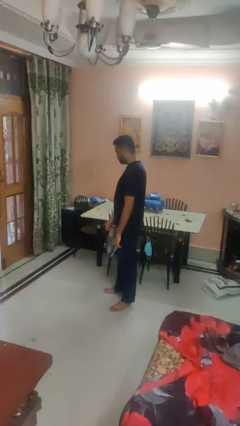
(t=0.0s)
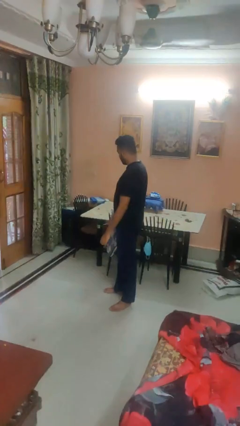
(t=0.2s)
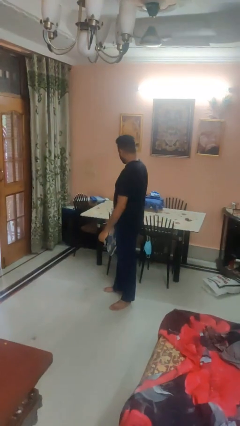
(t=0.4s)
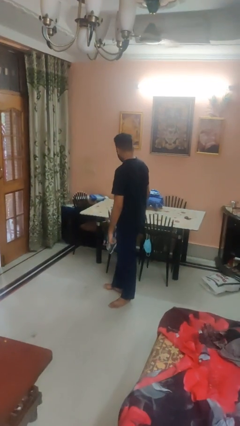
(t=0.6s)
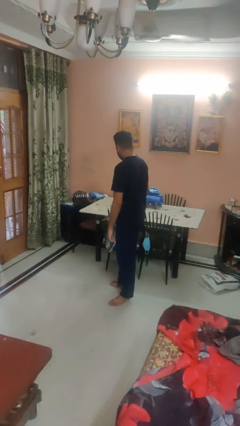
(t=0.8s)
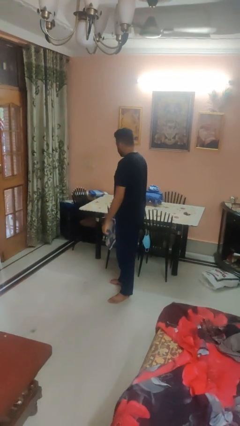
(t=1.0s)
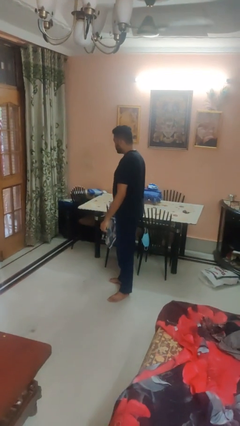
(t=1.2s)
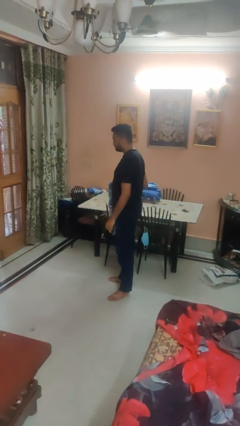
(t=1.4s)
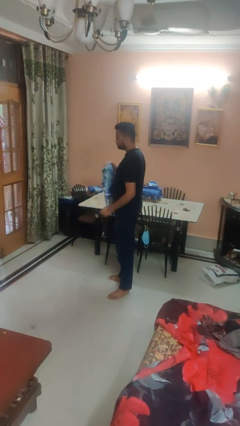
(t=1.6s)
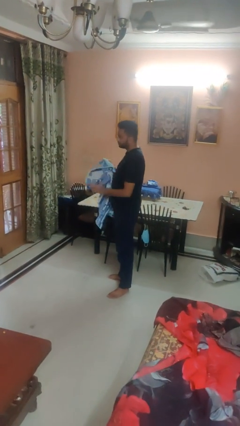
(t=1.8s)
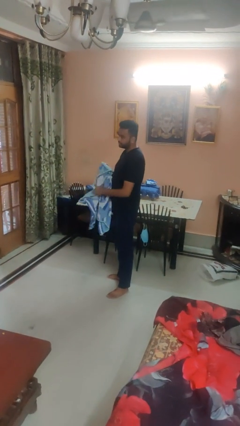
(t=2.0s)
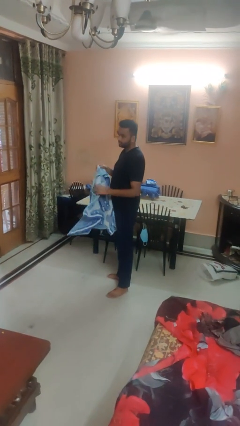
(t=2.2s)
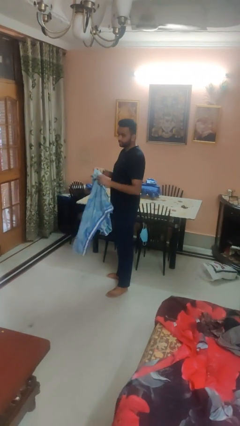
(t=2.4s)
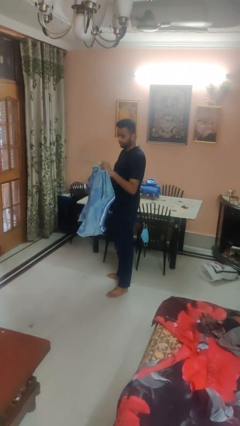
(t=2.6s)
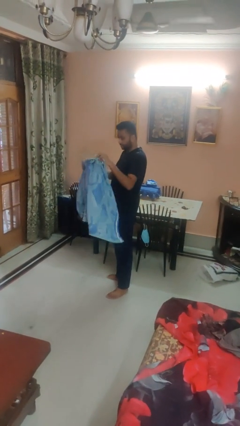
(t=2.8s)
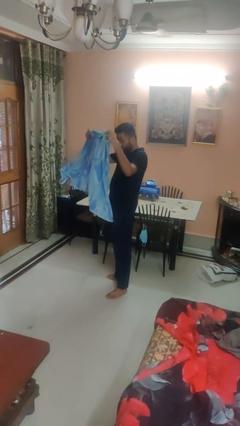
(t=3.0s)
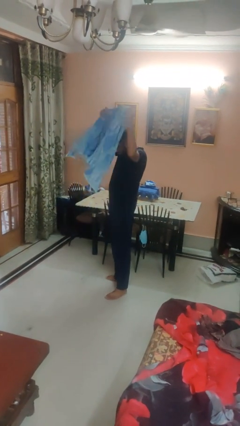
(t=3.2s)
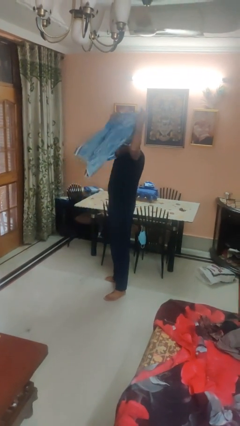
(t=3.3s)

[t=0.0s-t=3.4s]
person dries hair with towel

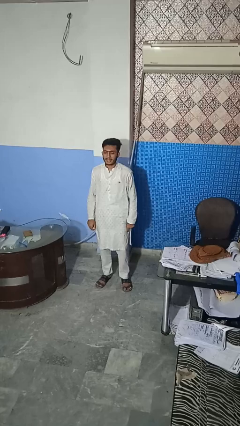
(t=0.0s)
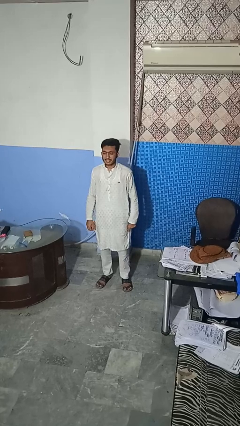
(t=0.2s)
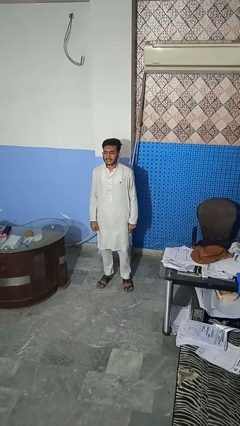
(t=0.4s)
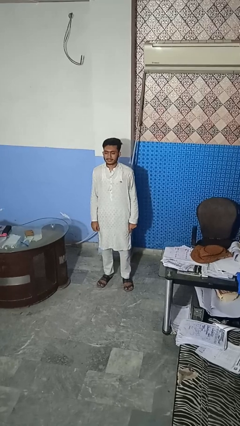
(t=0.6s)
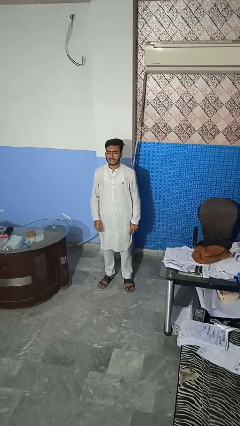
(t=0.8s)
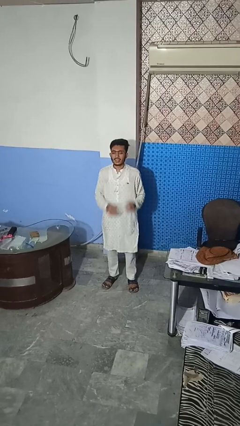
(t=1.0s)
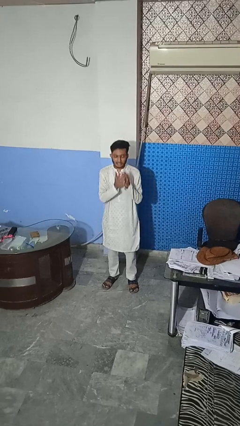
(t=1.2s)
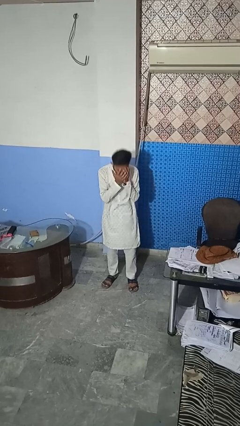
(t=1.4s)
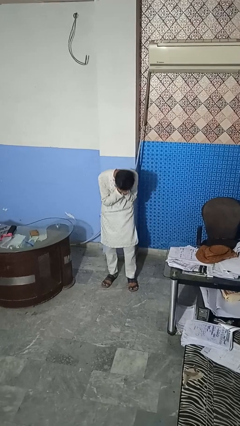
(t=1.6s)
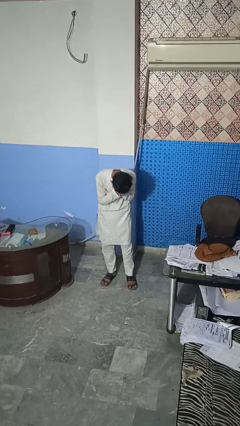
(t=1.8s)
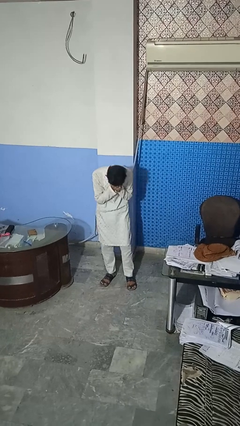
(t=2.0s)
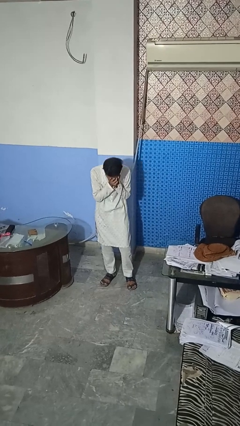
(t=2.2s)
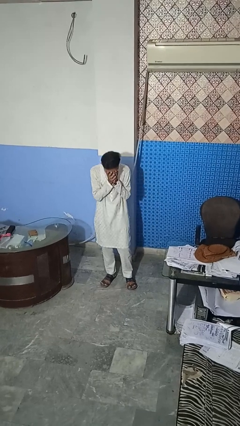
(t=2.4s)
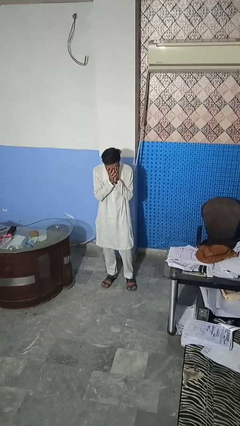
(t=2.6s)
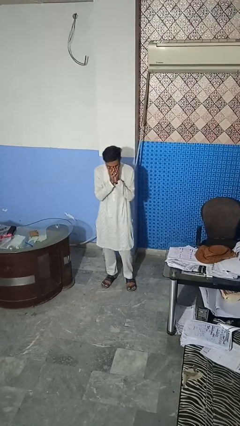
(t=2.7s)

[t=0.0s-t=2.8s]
person sneezes into hand

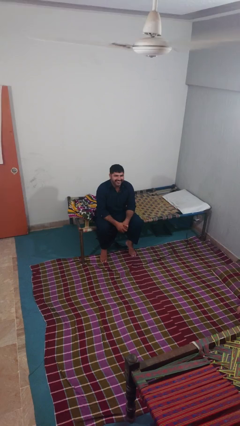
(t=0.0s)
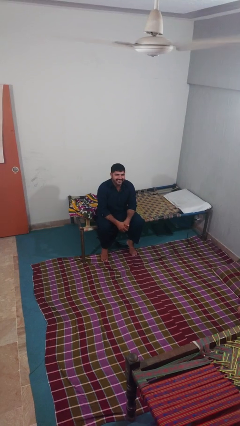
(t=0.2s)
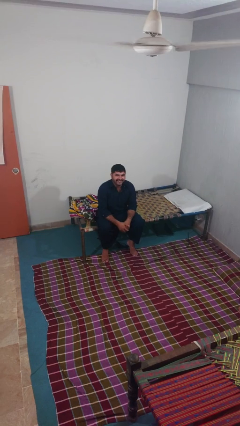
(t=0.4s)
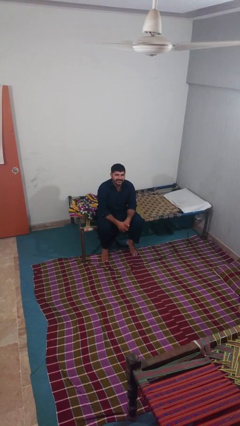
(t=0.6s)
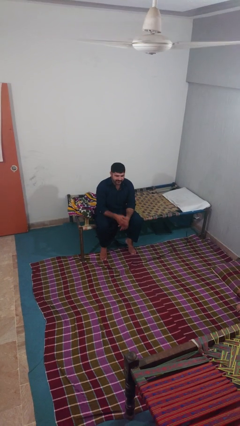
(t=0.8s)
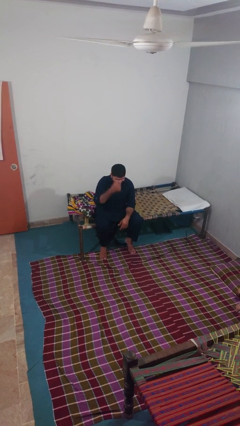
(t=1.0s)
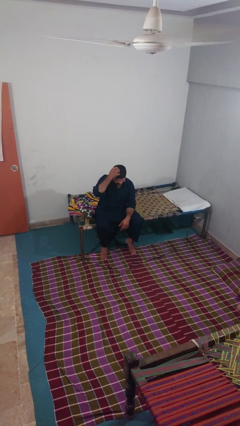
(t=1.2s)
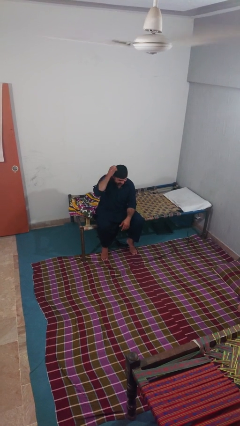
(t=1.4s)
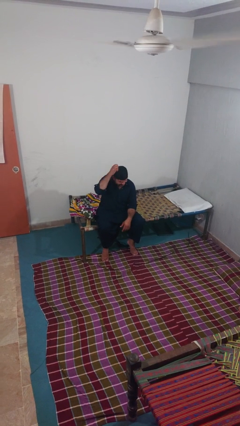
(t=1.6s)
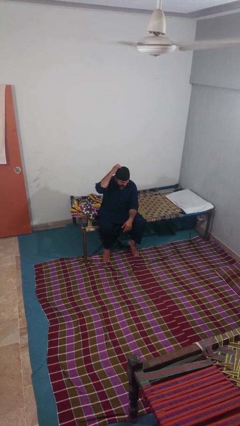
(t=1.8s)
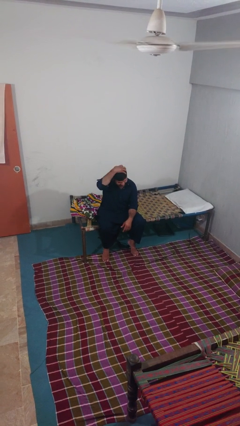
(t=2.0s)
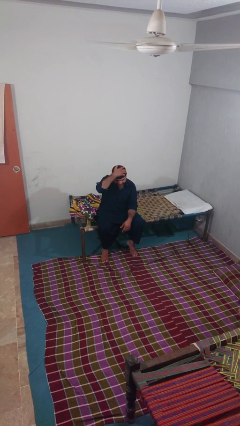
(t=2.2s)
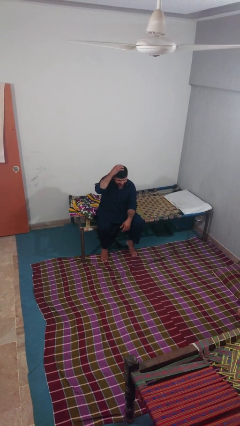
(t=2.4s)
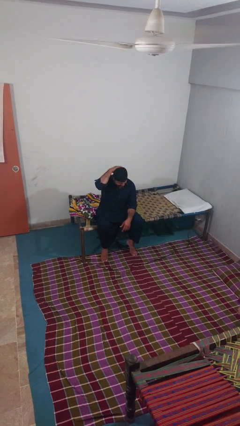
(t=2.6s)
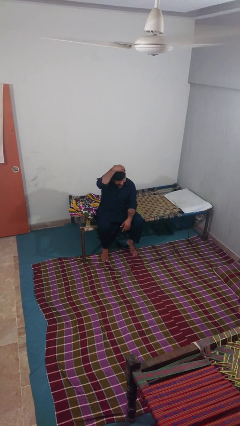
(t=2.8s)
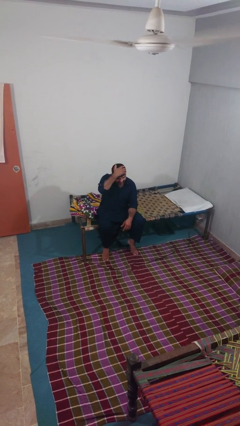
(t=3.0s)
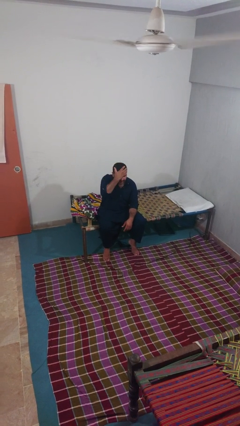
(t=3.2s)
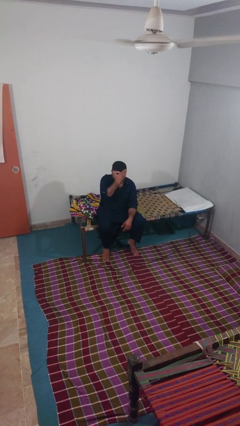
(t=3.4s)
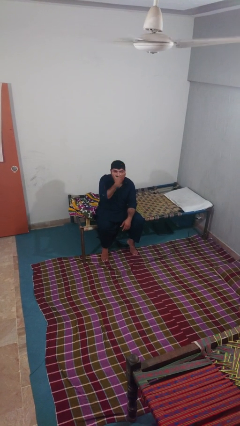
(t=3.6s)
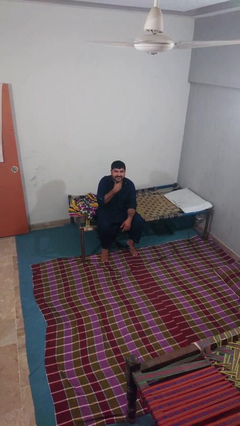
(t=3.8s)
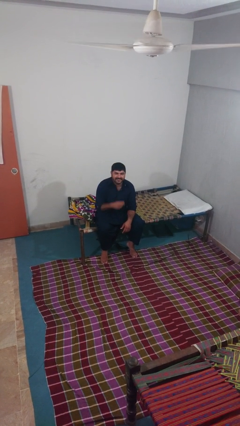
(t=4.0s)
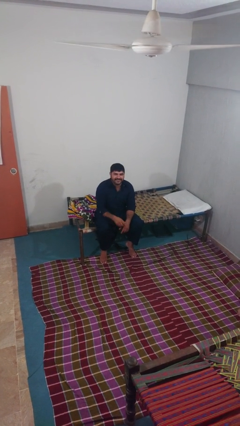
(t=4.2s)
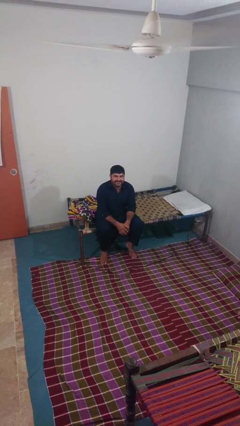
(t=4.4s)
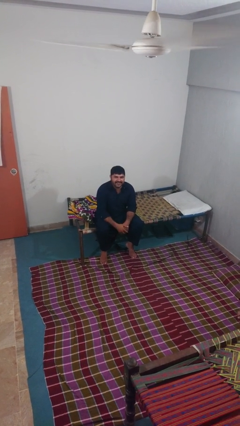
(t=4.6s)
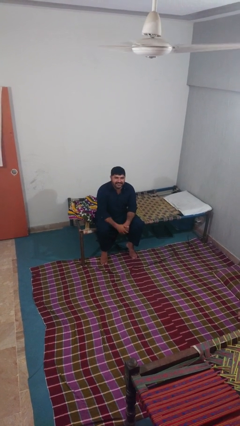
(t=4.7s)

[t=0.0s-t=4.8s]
person scratches face

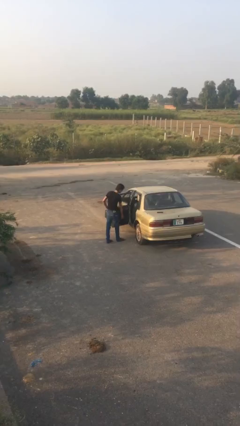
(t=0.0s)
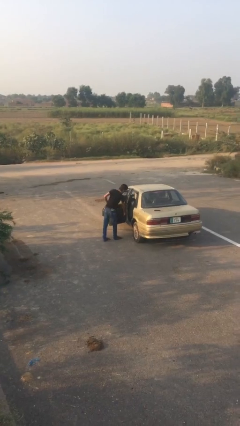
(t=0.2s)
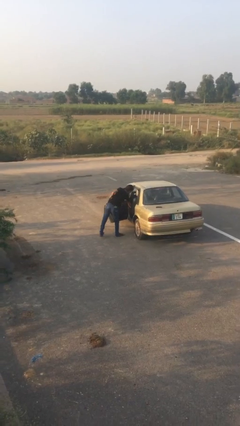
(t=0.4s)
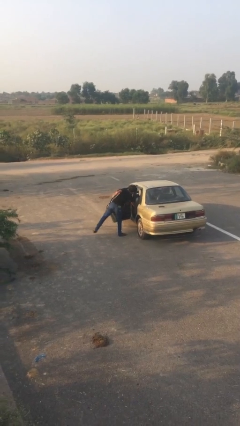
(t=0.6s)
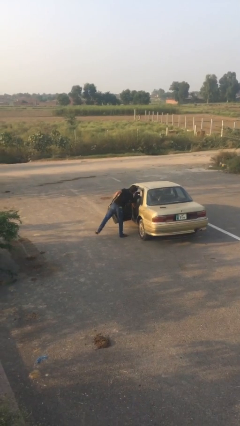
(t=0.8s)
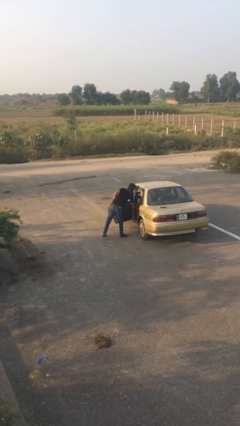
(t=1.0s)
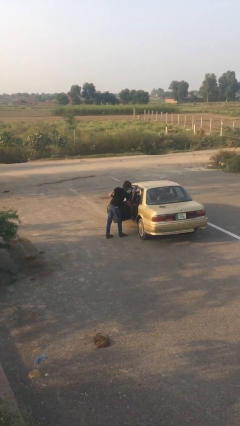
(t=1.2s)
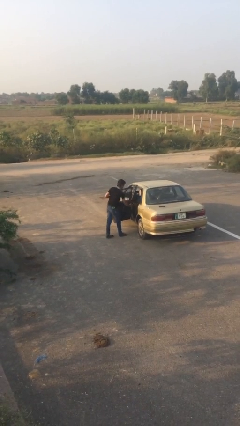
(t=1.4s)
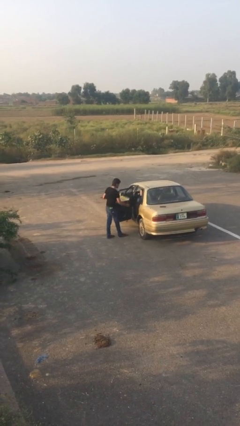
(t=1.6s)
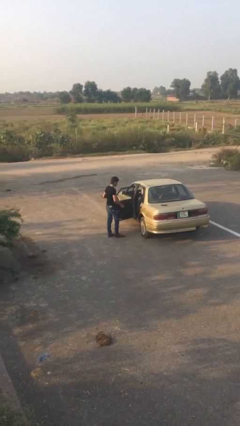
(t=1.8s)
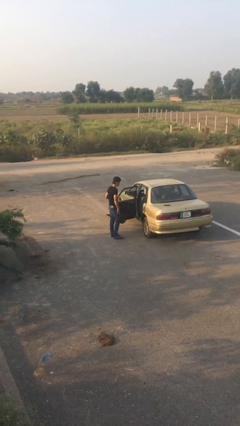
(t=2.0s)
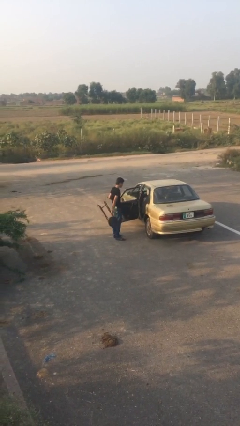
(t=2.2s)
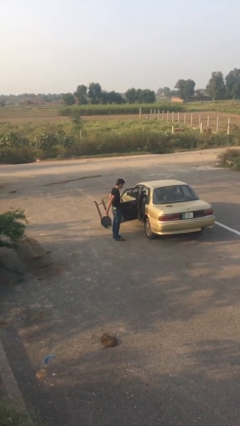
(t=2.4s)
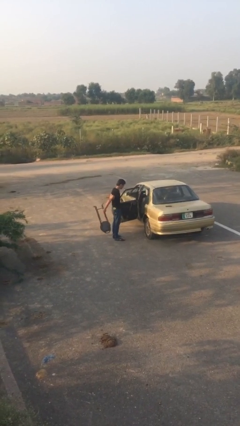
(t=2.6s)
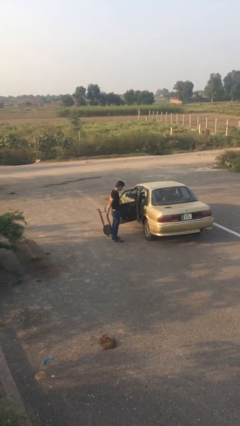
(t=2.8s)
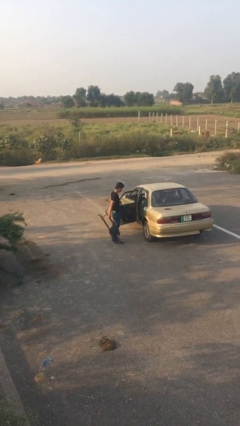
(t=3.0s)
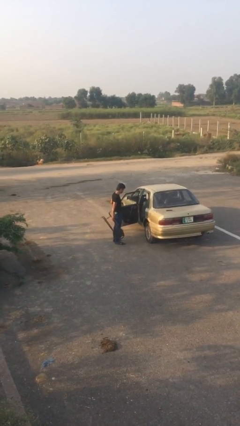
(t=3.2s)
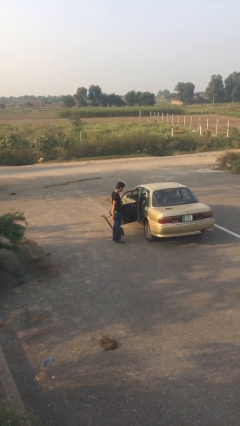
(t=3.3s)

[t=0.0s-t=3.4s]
person unloads car

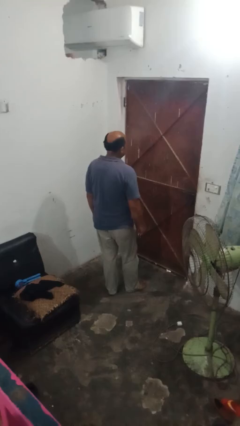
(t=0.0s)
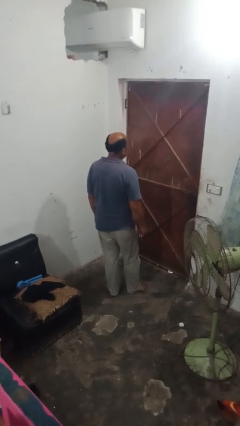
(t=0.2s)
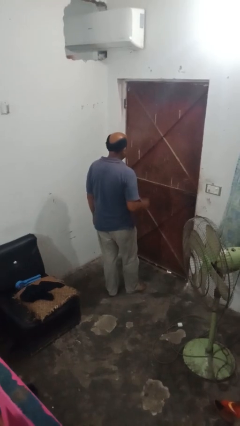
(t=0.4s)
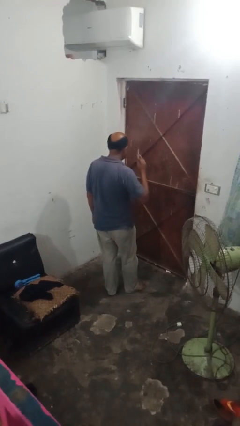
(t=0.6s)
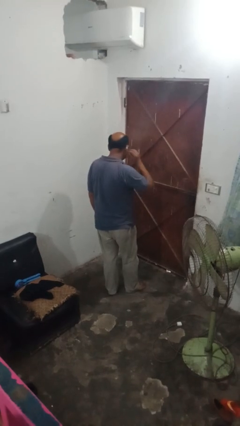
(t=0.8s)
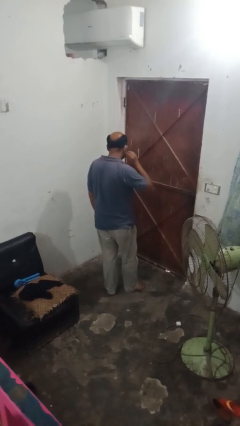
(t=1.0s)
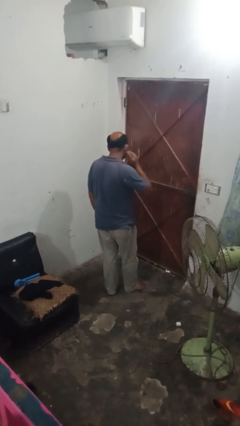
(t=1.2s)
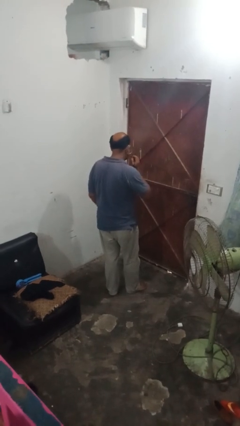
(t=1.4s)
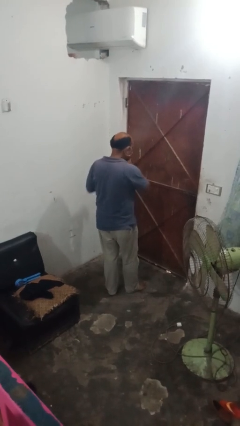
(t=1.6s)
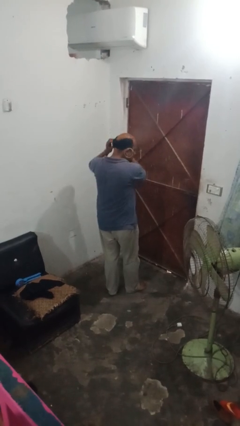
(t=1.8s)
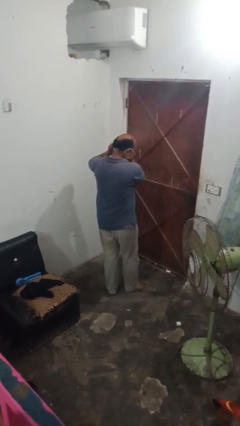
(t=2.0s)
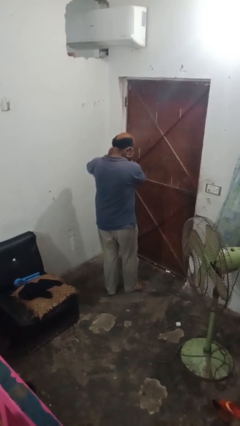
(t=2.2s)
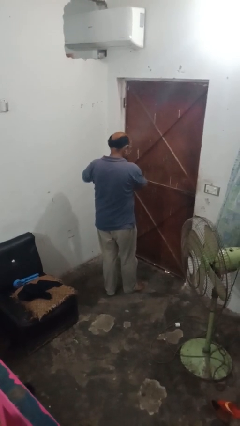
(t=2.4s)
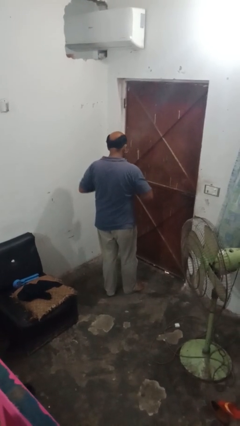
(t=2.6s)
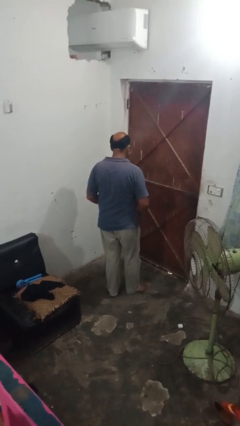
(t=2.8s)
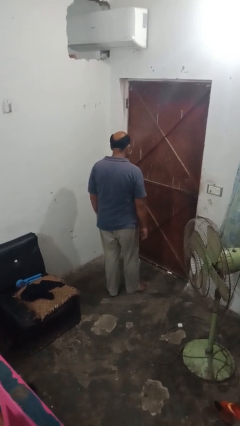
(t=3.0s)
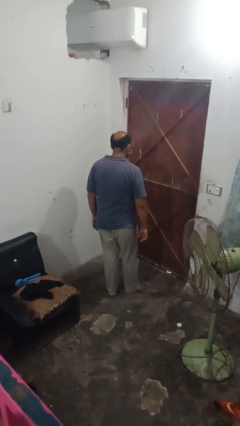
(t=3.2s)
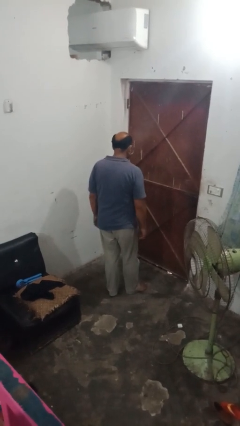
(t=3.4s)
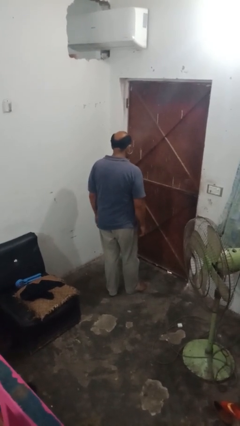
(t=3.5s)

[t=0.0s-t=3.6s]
person puts on earrings
